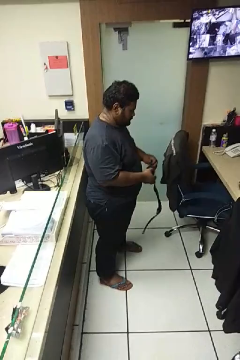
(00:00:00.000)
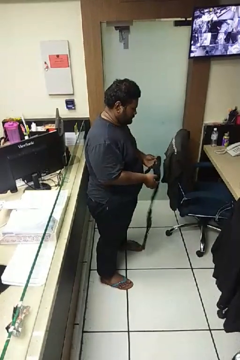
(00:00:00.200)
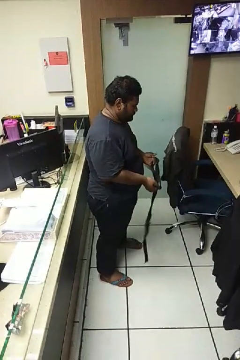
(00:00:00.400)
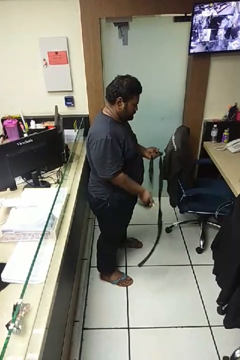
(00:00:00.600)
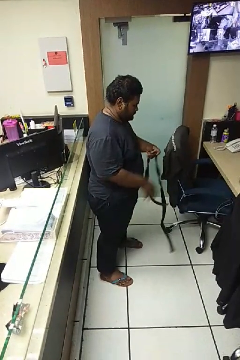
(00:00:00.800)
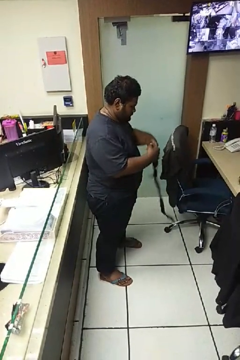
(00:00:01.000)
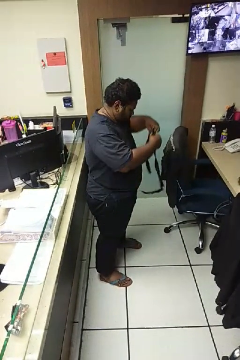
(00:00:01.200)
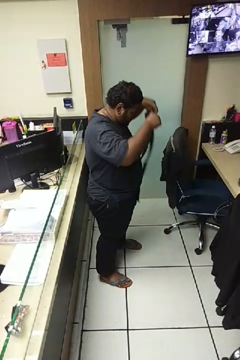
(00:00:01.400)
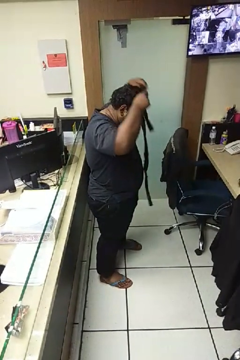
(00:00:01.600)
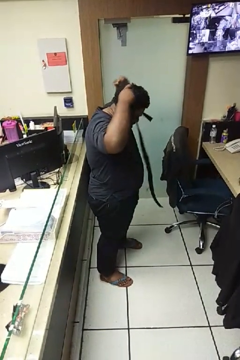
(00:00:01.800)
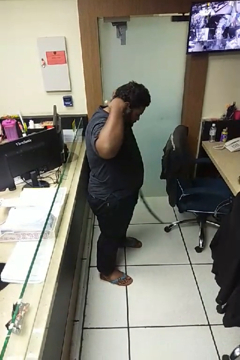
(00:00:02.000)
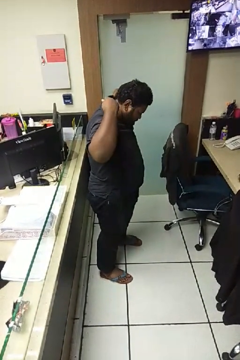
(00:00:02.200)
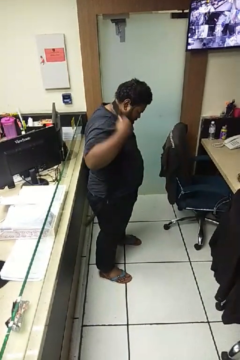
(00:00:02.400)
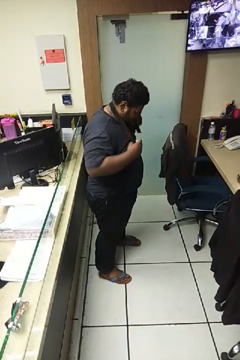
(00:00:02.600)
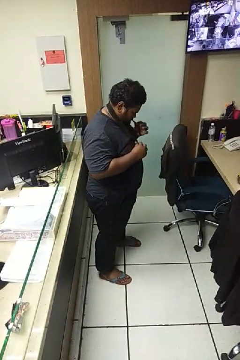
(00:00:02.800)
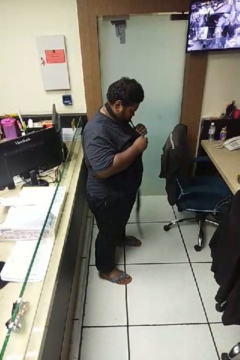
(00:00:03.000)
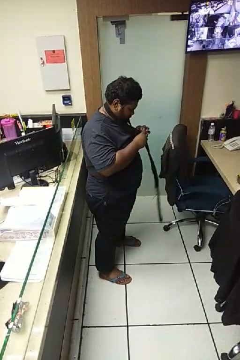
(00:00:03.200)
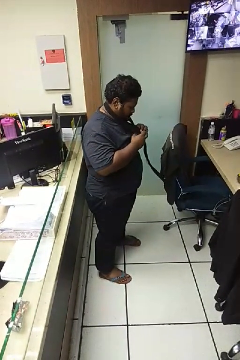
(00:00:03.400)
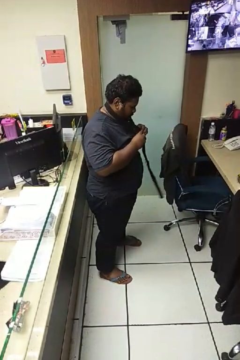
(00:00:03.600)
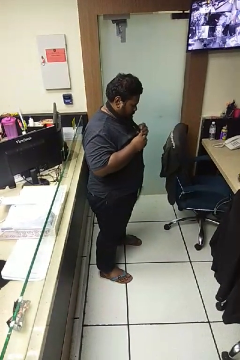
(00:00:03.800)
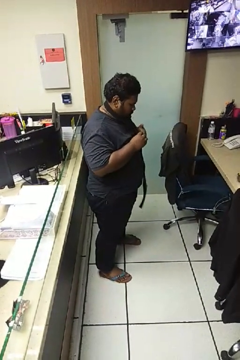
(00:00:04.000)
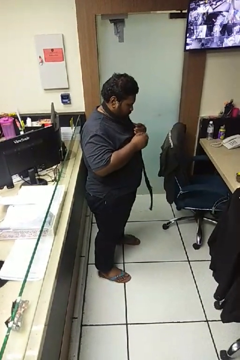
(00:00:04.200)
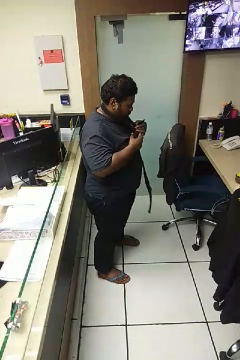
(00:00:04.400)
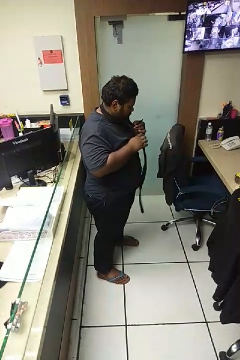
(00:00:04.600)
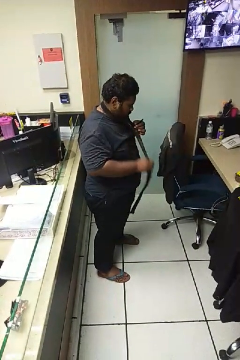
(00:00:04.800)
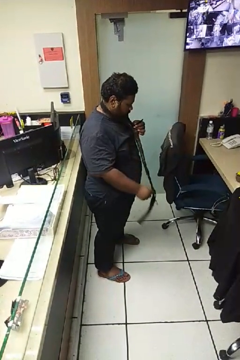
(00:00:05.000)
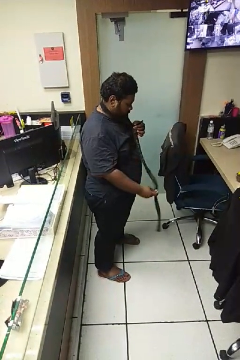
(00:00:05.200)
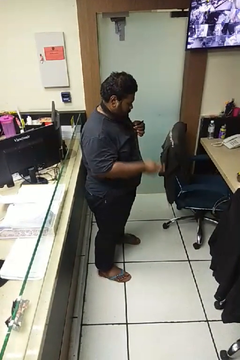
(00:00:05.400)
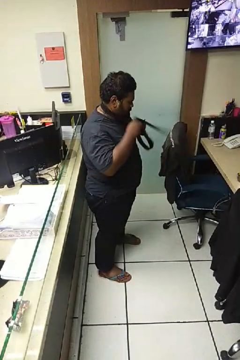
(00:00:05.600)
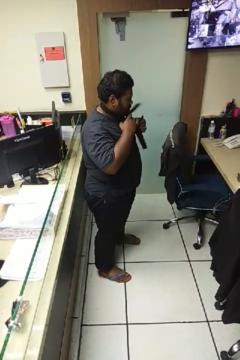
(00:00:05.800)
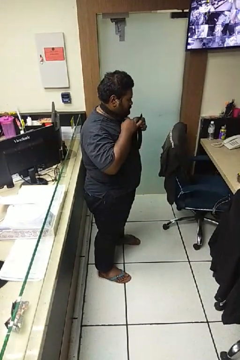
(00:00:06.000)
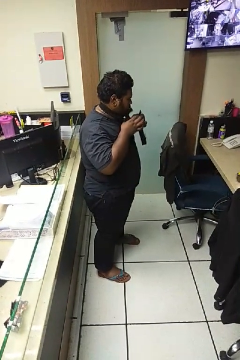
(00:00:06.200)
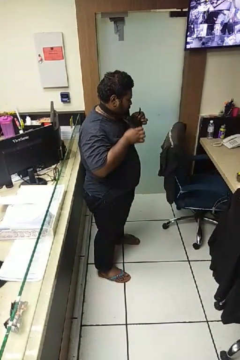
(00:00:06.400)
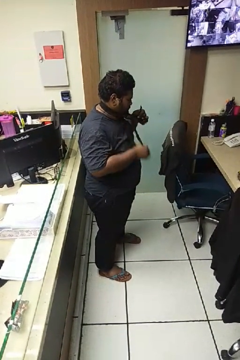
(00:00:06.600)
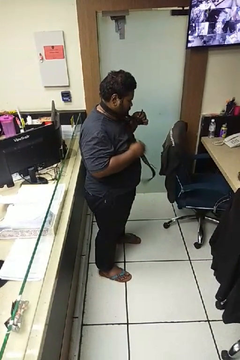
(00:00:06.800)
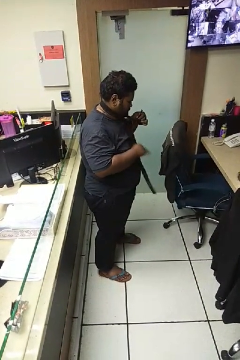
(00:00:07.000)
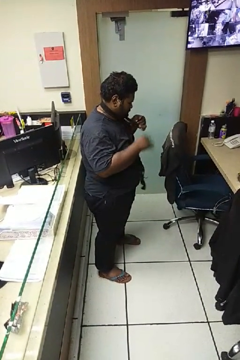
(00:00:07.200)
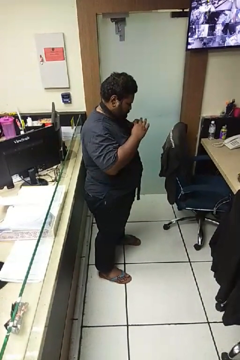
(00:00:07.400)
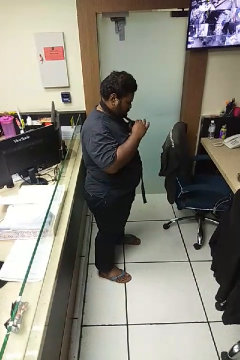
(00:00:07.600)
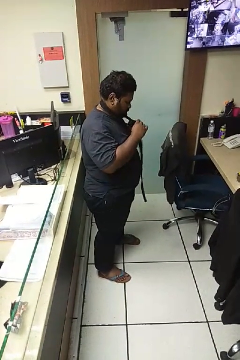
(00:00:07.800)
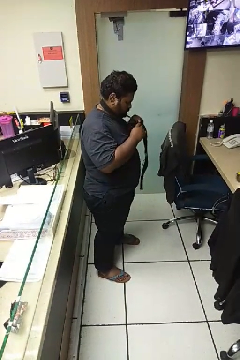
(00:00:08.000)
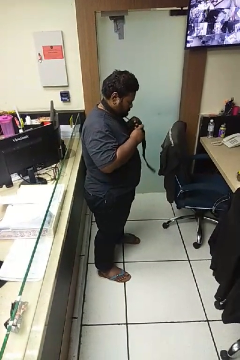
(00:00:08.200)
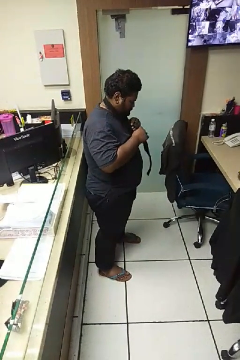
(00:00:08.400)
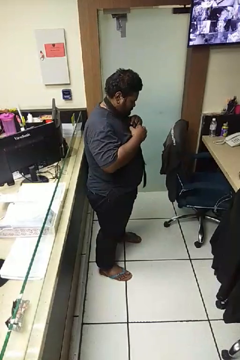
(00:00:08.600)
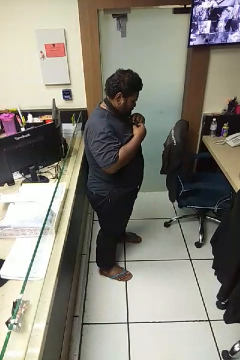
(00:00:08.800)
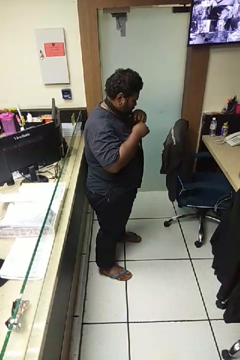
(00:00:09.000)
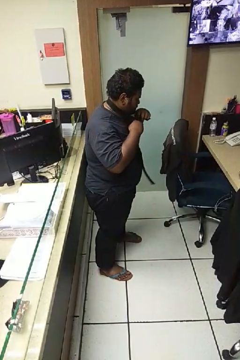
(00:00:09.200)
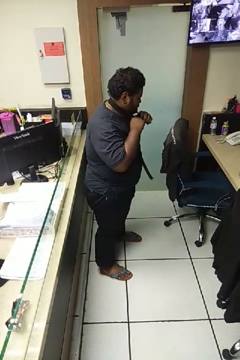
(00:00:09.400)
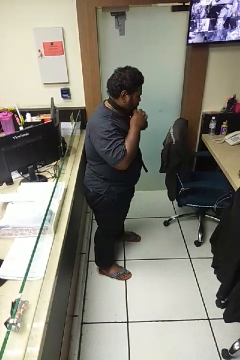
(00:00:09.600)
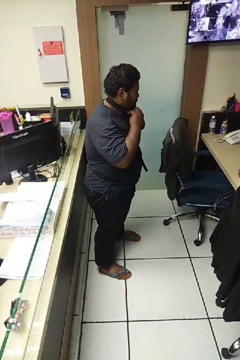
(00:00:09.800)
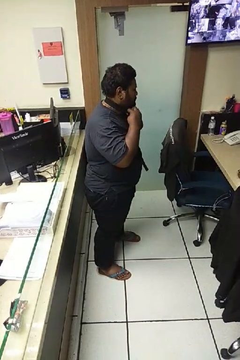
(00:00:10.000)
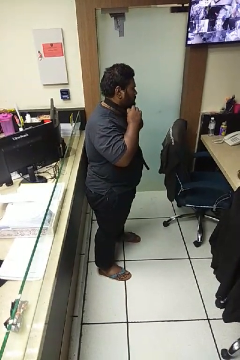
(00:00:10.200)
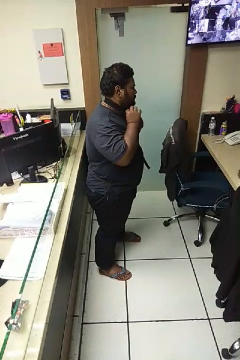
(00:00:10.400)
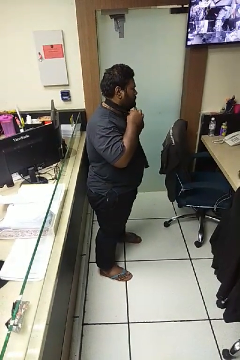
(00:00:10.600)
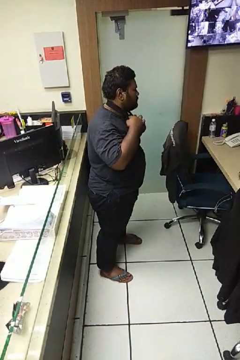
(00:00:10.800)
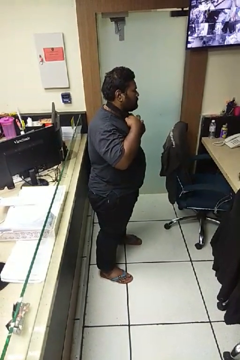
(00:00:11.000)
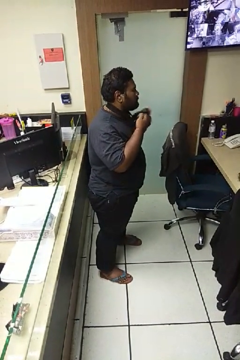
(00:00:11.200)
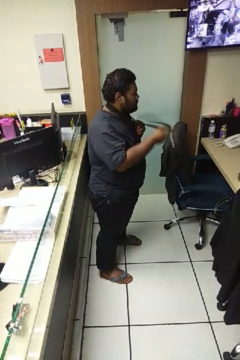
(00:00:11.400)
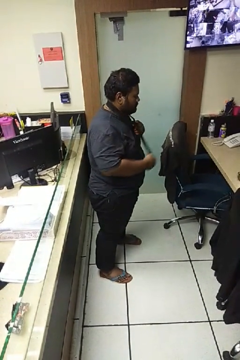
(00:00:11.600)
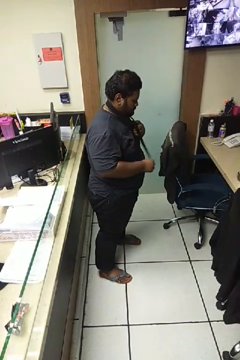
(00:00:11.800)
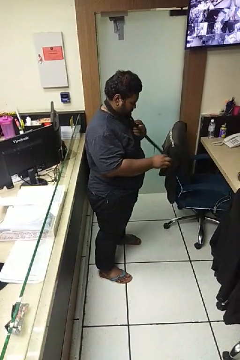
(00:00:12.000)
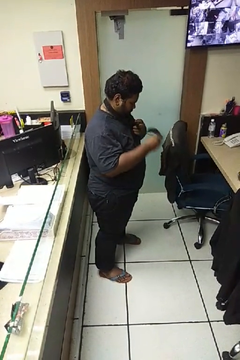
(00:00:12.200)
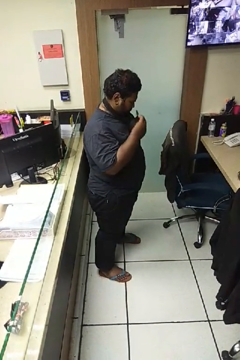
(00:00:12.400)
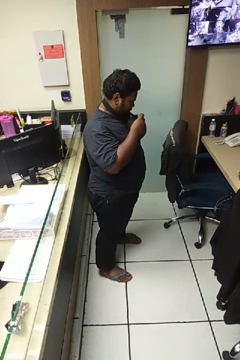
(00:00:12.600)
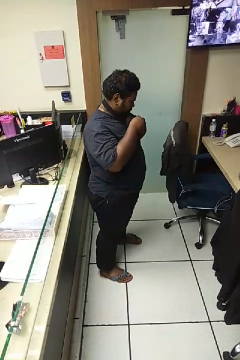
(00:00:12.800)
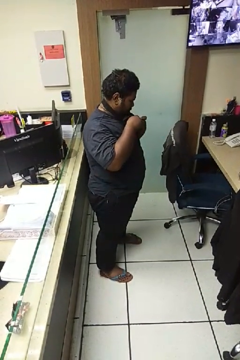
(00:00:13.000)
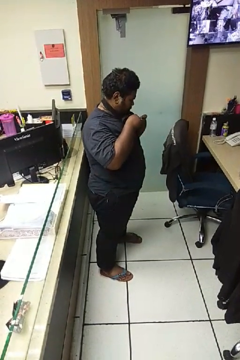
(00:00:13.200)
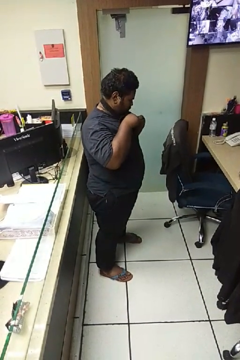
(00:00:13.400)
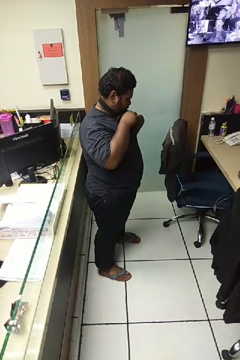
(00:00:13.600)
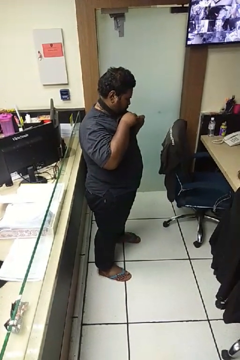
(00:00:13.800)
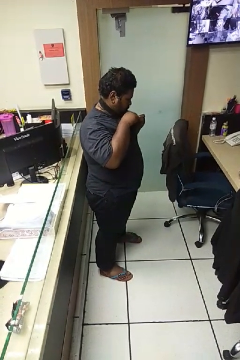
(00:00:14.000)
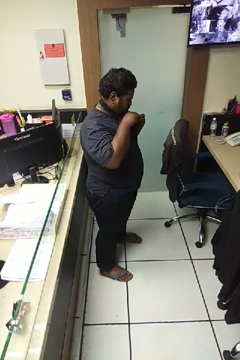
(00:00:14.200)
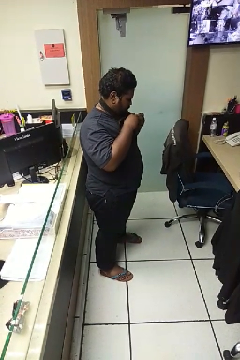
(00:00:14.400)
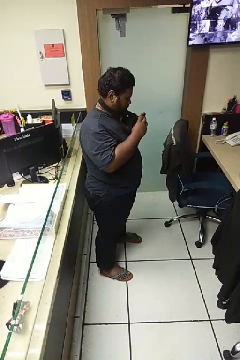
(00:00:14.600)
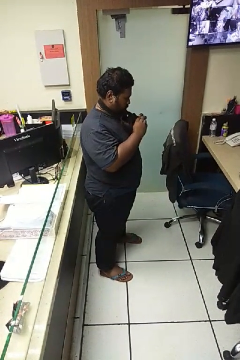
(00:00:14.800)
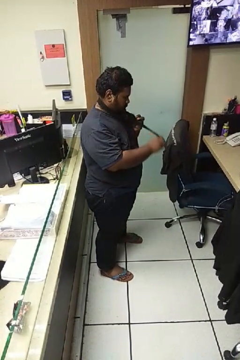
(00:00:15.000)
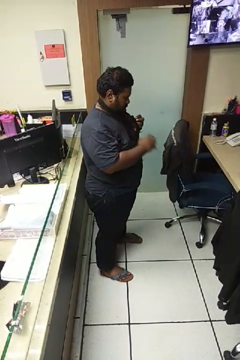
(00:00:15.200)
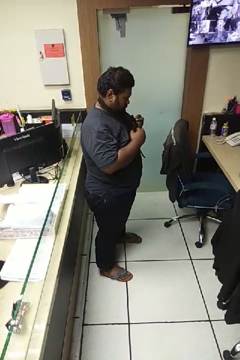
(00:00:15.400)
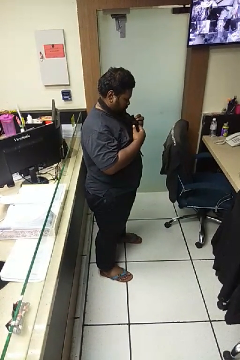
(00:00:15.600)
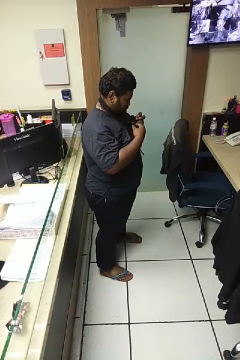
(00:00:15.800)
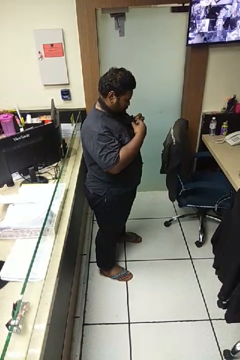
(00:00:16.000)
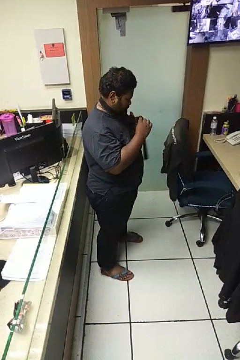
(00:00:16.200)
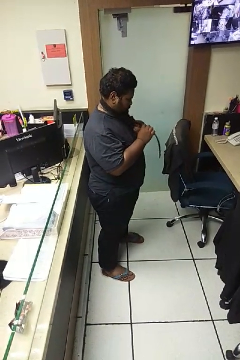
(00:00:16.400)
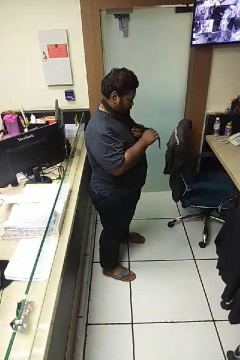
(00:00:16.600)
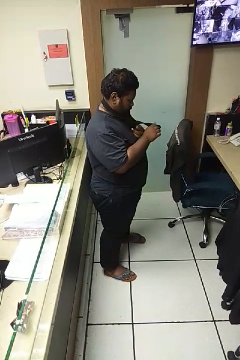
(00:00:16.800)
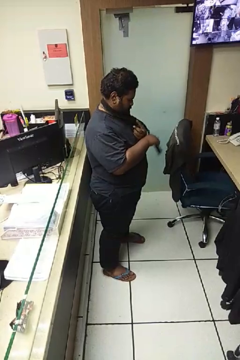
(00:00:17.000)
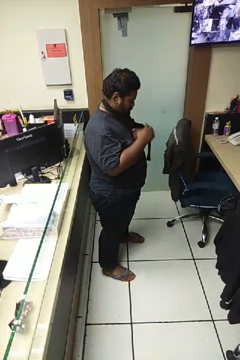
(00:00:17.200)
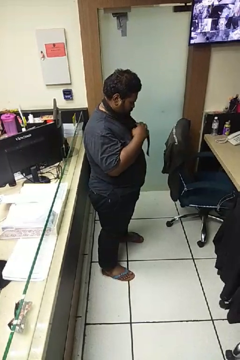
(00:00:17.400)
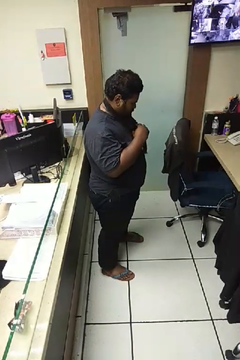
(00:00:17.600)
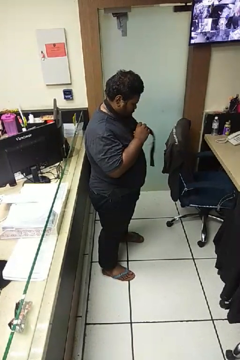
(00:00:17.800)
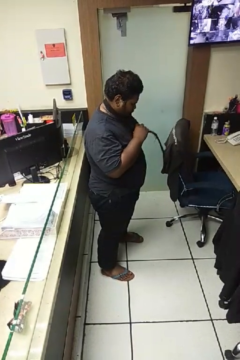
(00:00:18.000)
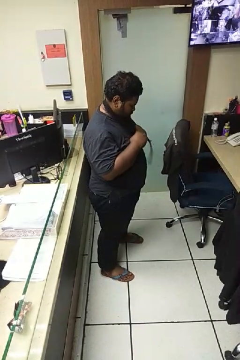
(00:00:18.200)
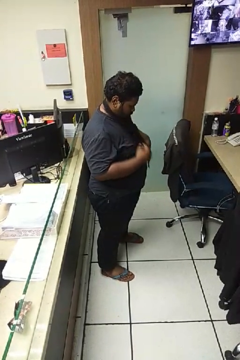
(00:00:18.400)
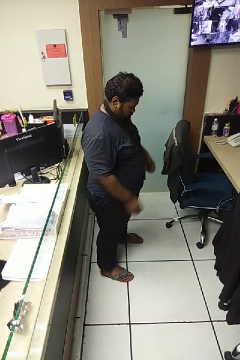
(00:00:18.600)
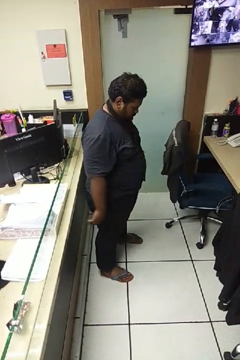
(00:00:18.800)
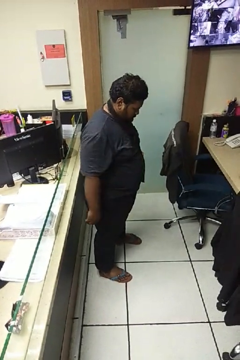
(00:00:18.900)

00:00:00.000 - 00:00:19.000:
person puts on necktie

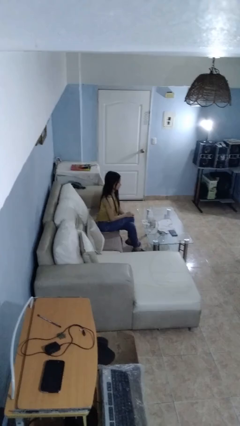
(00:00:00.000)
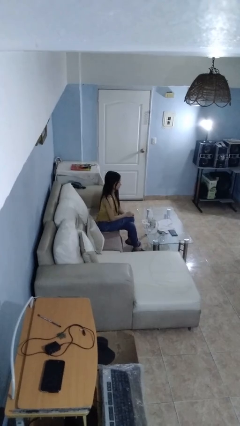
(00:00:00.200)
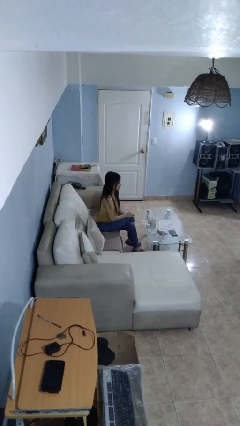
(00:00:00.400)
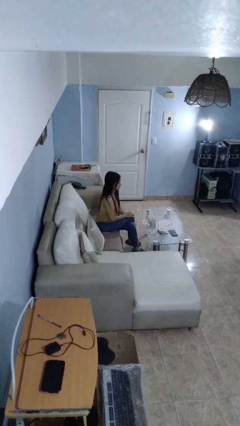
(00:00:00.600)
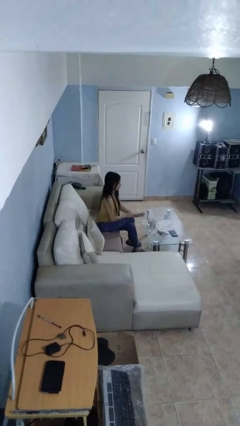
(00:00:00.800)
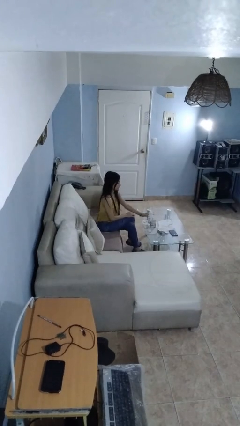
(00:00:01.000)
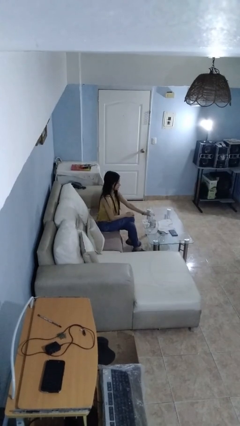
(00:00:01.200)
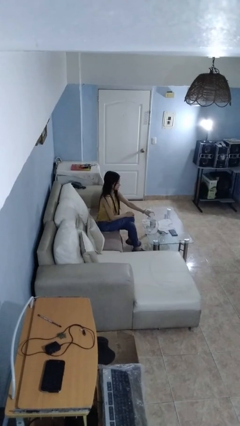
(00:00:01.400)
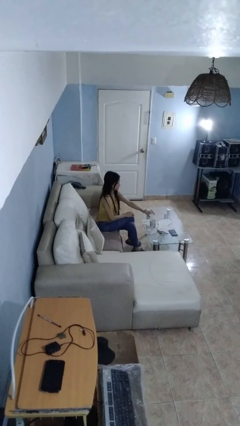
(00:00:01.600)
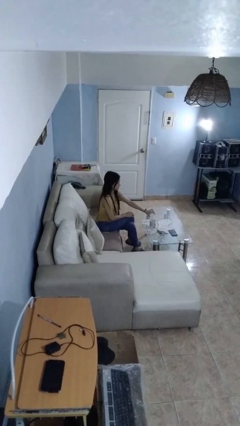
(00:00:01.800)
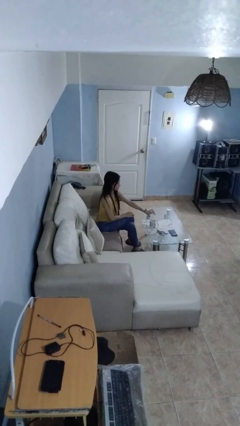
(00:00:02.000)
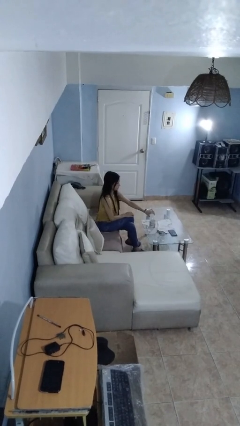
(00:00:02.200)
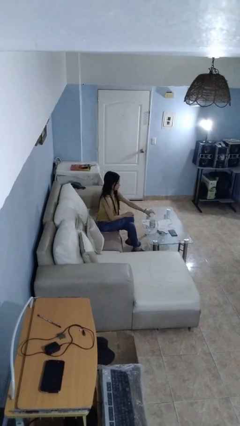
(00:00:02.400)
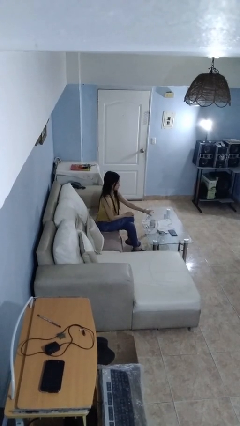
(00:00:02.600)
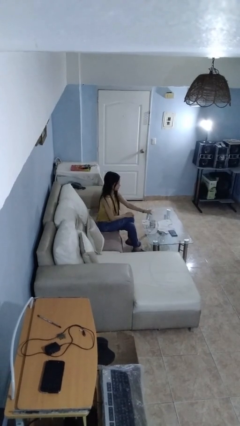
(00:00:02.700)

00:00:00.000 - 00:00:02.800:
person pours liquid into cup
